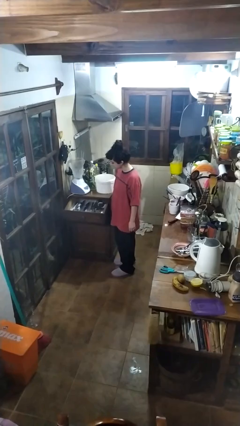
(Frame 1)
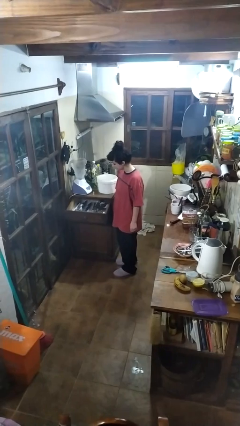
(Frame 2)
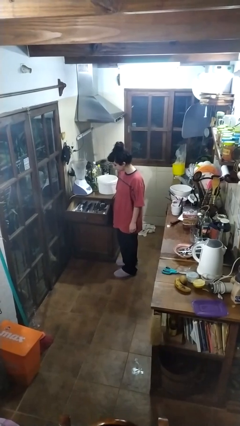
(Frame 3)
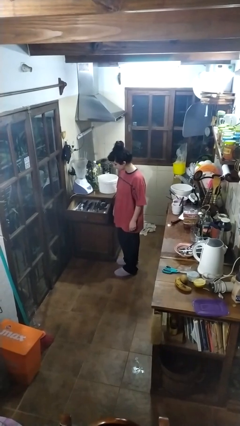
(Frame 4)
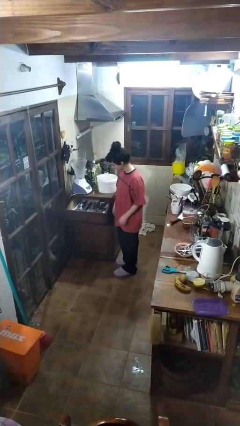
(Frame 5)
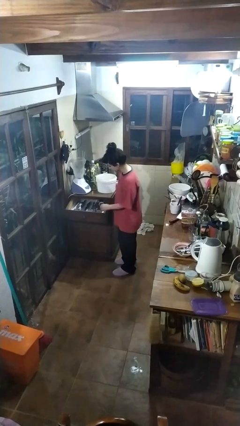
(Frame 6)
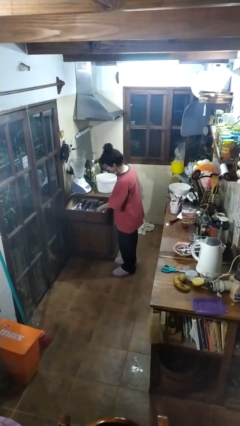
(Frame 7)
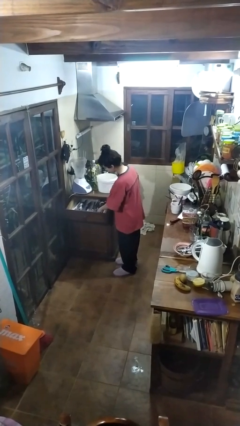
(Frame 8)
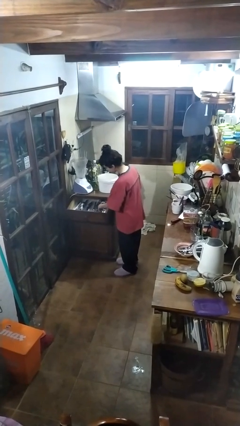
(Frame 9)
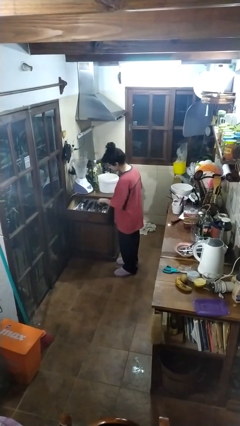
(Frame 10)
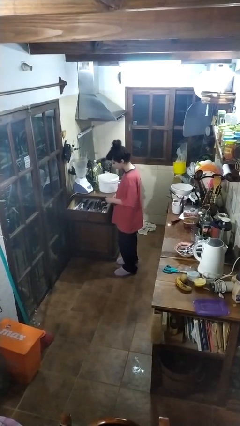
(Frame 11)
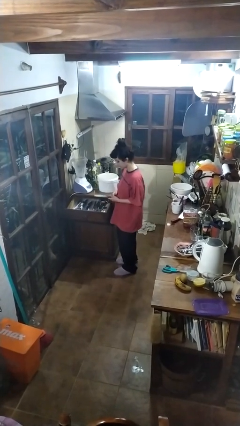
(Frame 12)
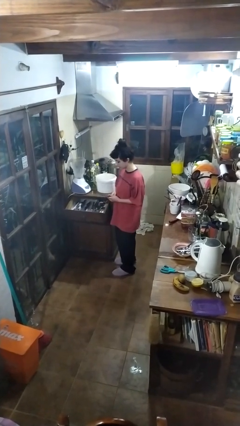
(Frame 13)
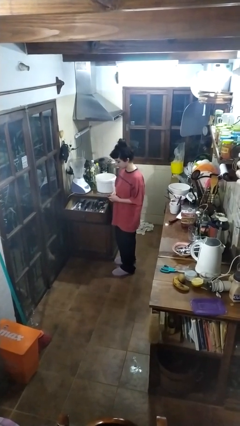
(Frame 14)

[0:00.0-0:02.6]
person takes object from kitchen drawer

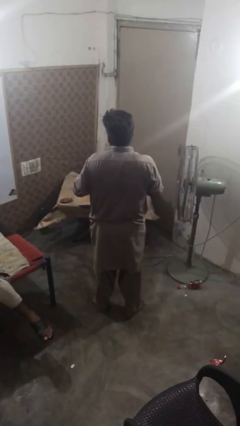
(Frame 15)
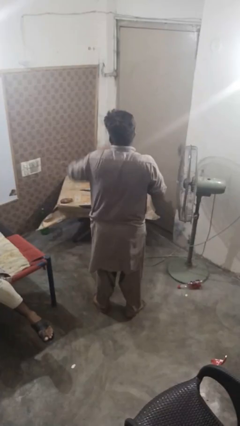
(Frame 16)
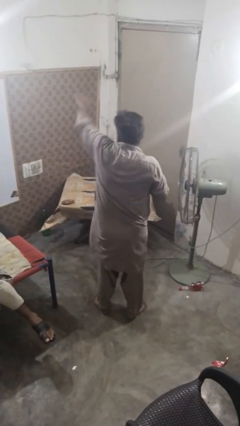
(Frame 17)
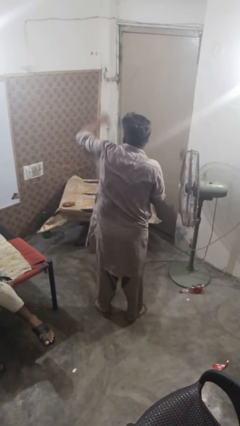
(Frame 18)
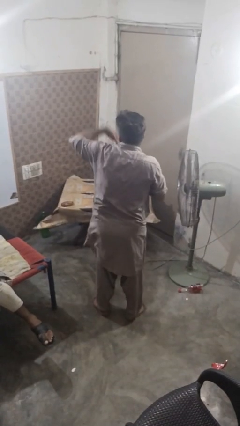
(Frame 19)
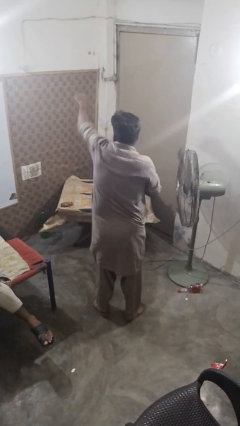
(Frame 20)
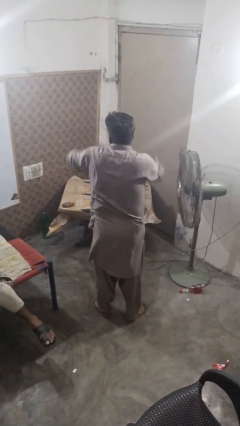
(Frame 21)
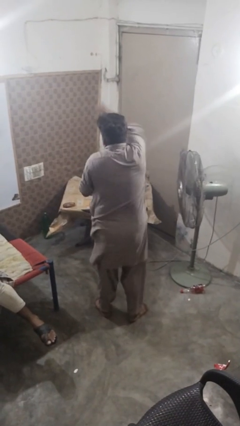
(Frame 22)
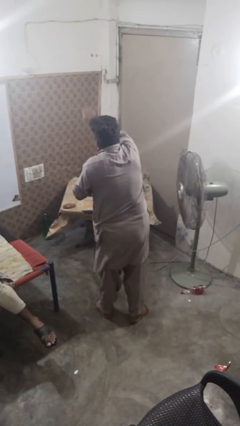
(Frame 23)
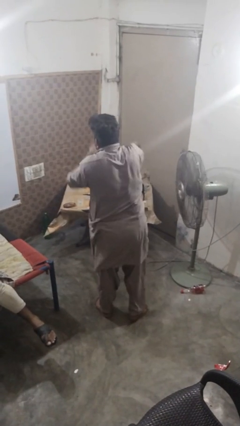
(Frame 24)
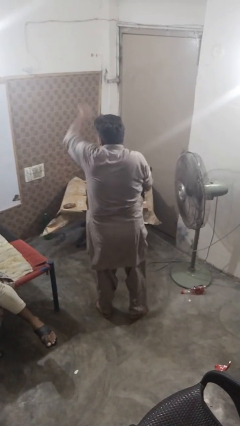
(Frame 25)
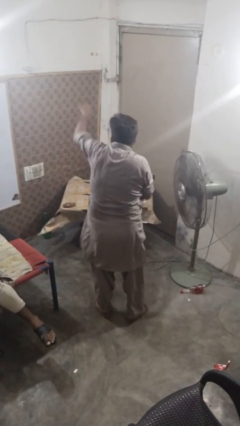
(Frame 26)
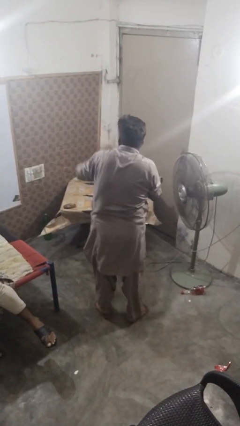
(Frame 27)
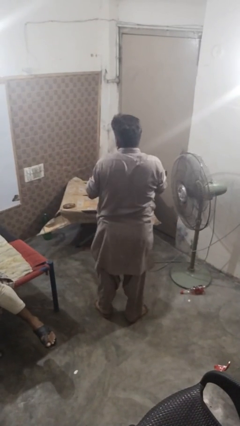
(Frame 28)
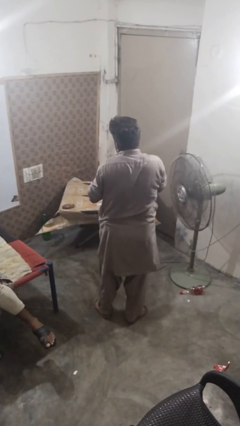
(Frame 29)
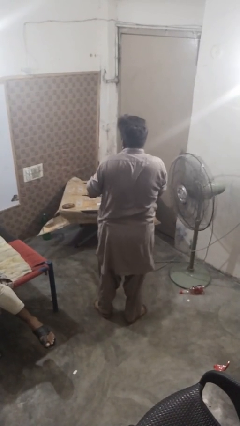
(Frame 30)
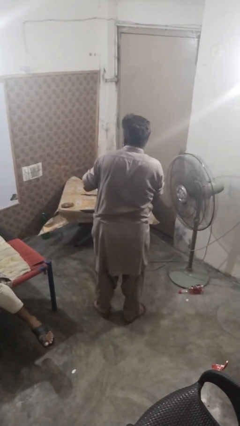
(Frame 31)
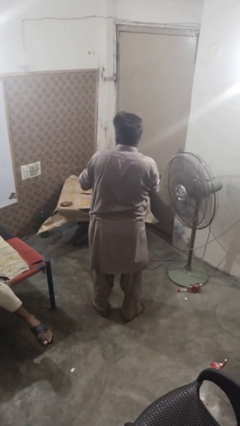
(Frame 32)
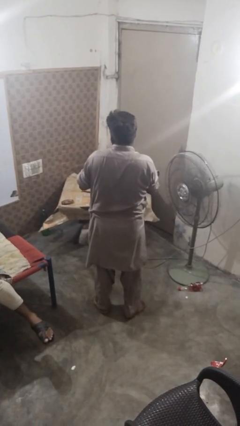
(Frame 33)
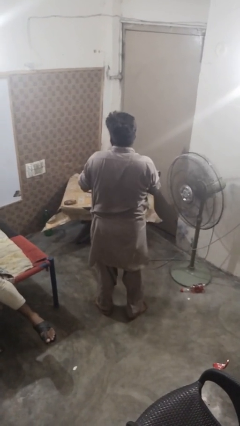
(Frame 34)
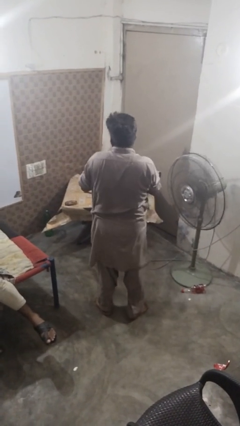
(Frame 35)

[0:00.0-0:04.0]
person punches

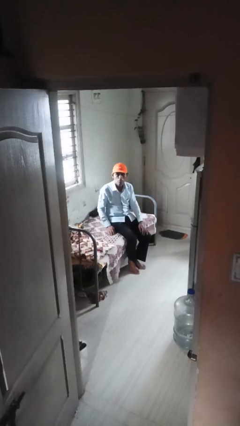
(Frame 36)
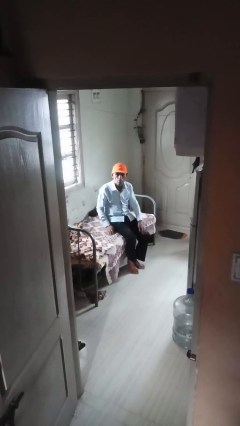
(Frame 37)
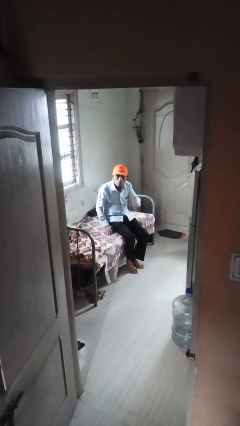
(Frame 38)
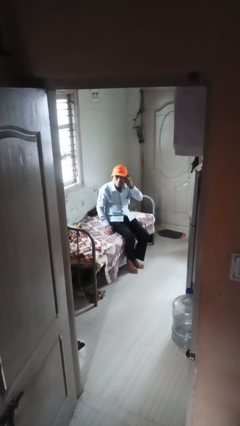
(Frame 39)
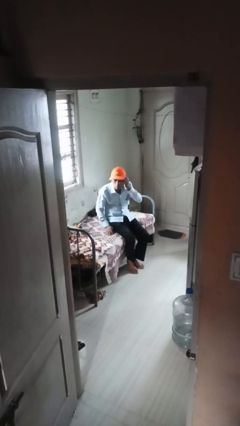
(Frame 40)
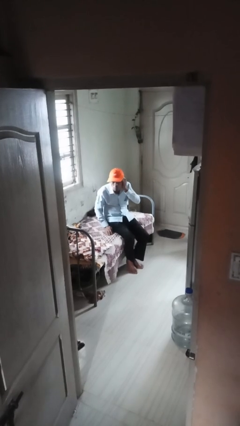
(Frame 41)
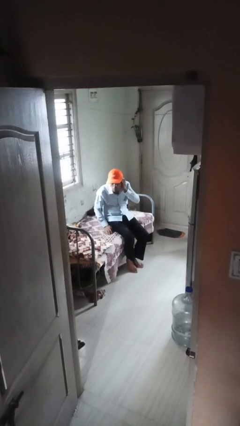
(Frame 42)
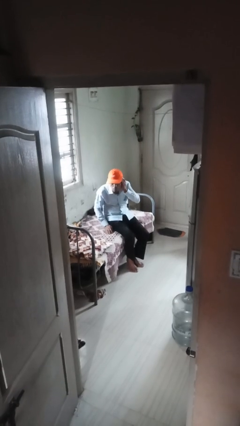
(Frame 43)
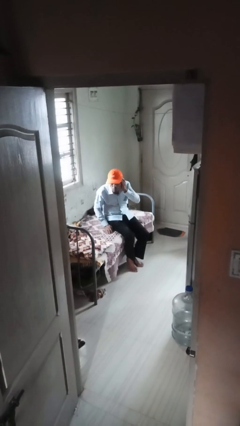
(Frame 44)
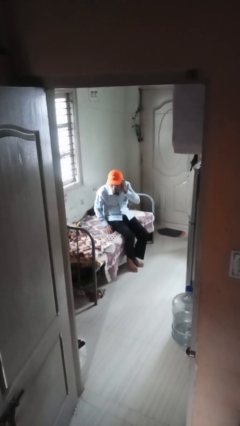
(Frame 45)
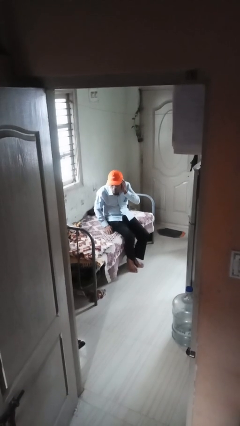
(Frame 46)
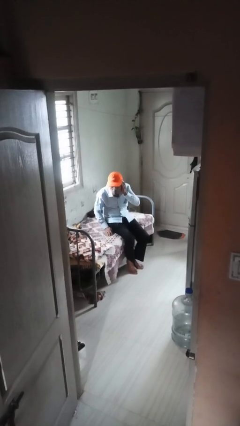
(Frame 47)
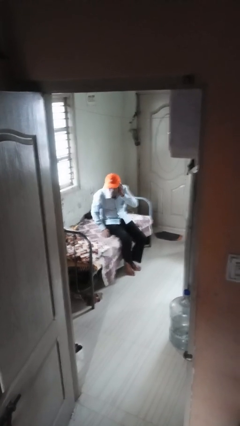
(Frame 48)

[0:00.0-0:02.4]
person gestures listen closely

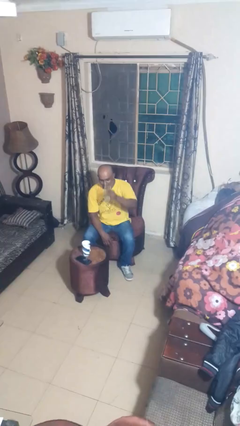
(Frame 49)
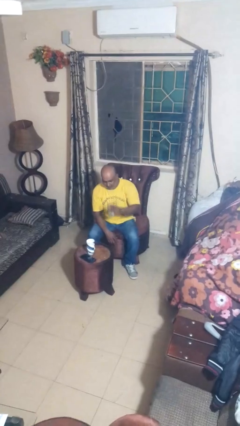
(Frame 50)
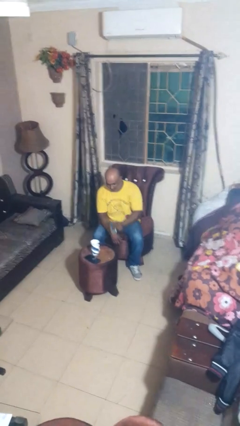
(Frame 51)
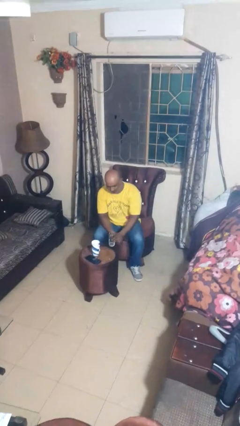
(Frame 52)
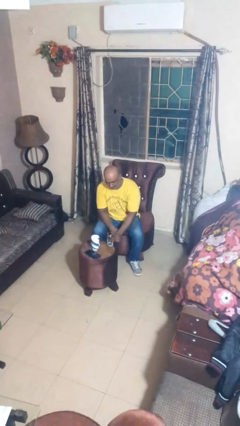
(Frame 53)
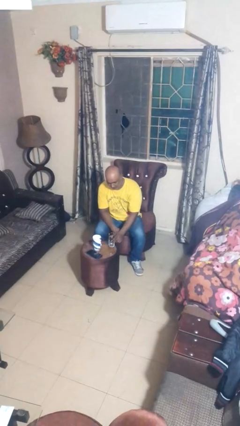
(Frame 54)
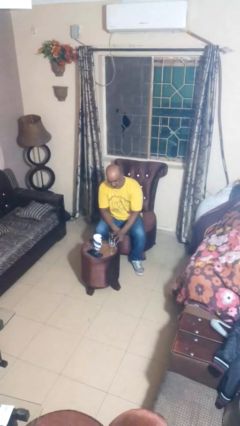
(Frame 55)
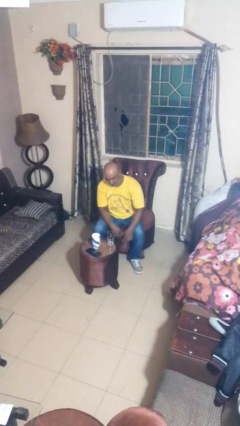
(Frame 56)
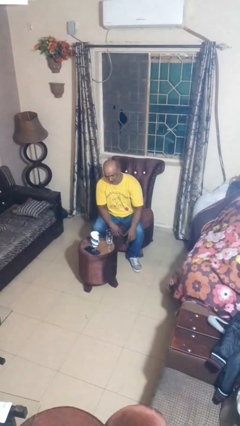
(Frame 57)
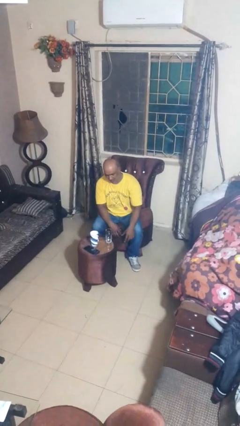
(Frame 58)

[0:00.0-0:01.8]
person puts down object on table

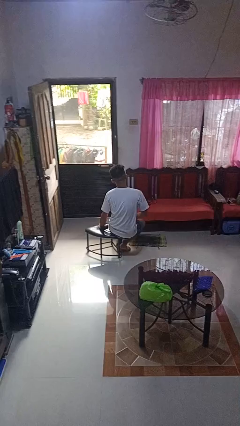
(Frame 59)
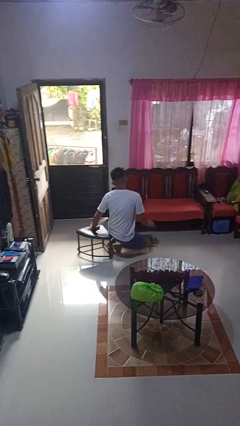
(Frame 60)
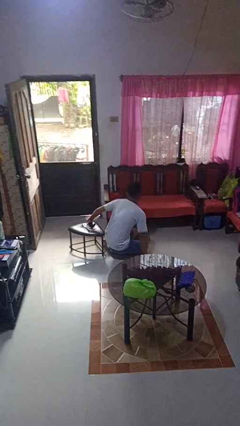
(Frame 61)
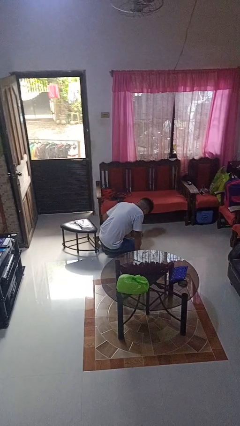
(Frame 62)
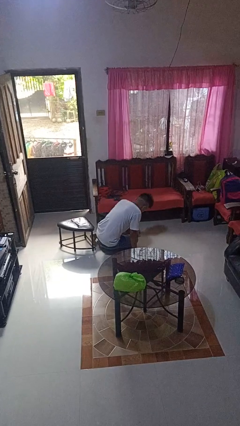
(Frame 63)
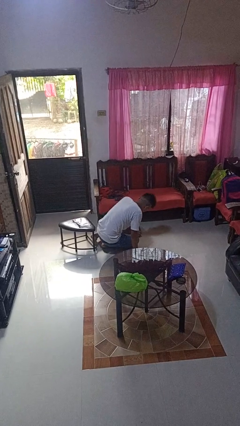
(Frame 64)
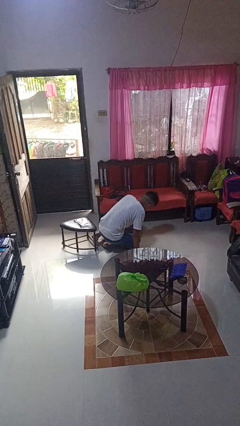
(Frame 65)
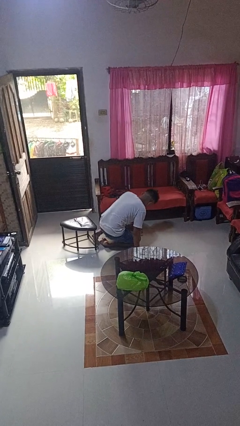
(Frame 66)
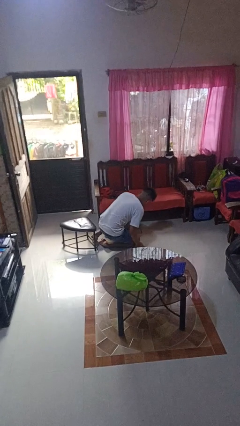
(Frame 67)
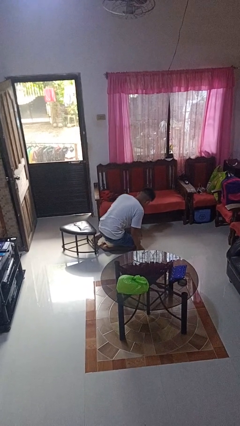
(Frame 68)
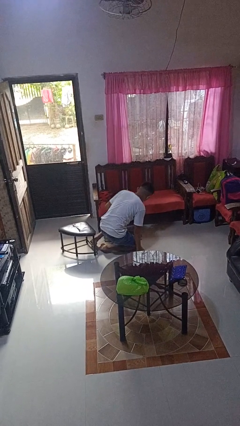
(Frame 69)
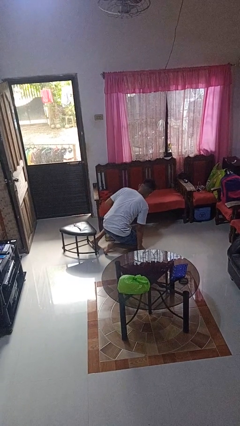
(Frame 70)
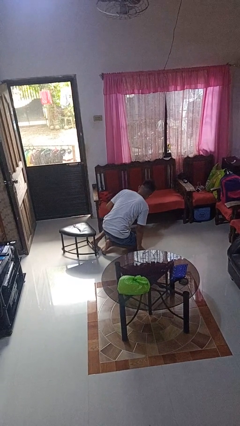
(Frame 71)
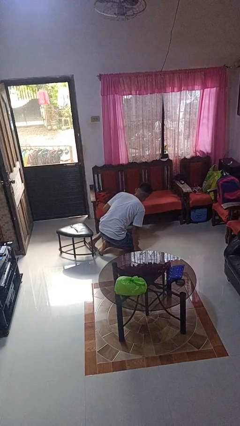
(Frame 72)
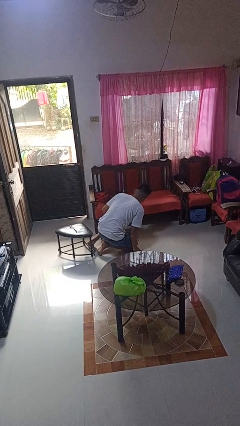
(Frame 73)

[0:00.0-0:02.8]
person falls from chair

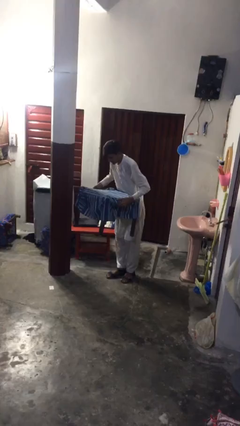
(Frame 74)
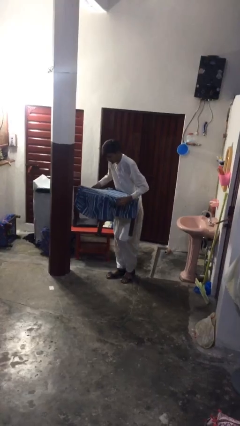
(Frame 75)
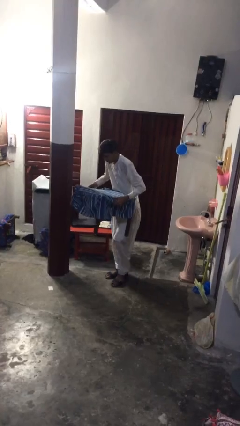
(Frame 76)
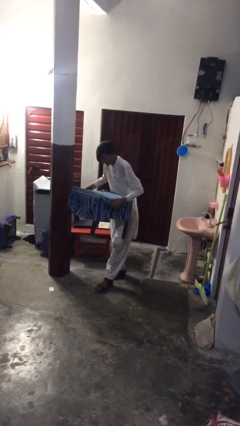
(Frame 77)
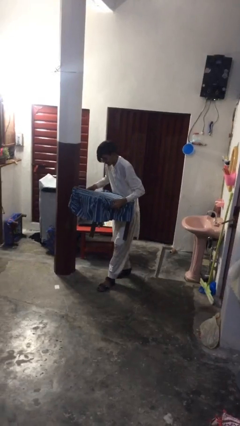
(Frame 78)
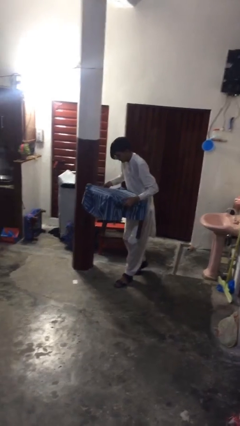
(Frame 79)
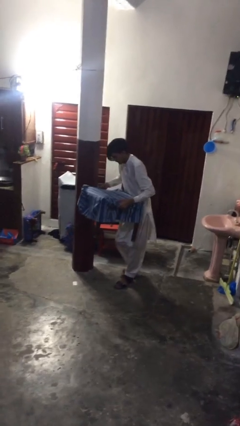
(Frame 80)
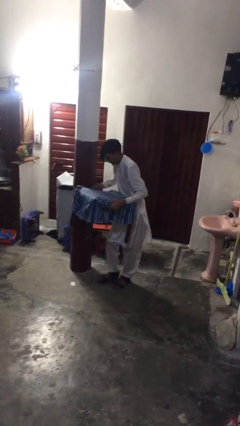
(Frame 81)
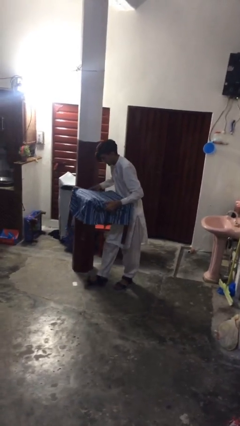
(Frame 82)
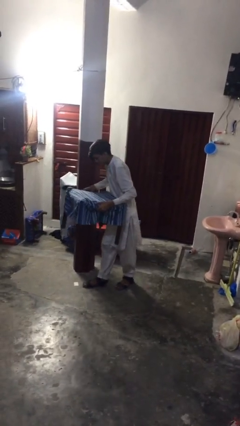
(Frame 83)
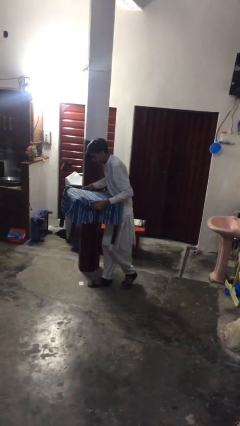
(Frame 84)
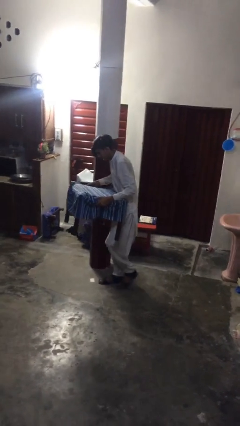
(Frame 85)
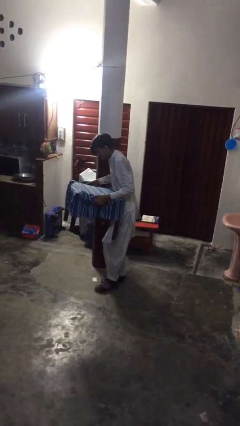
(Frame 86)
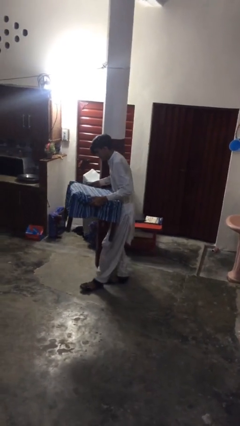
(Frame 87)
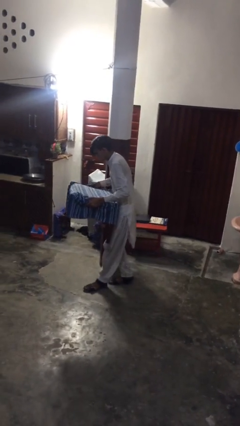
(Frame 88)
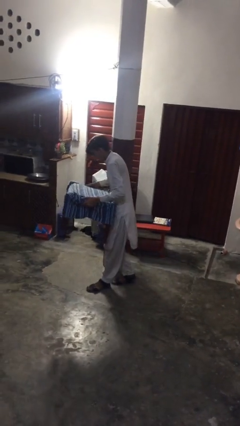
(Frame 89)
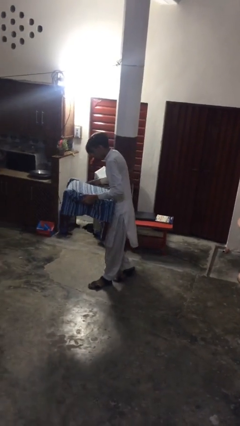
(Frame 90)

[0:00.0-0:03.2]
person carries heavy object

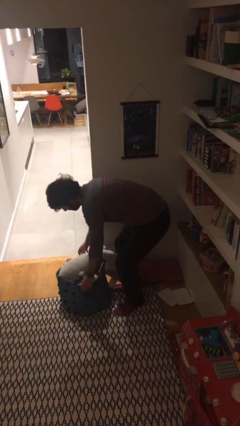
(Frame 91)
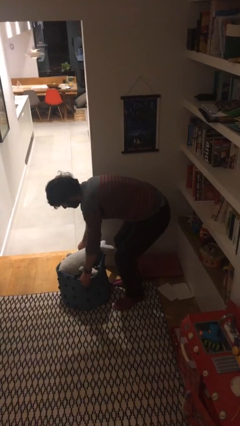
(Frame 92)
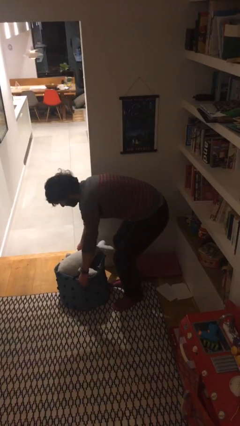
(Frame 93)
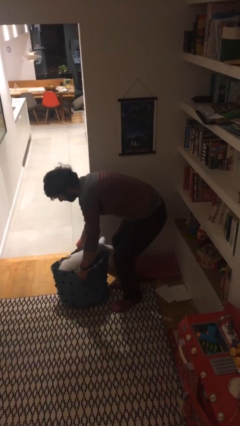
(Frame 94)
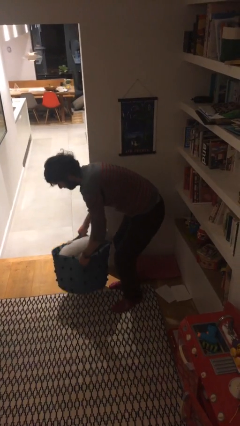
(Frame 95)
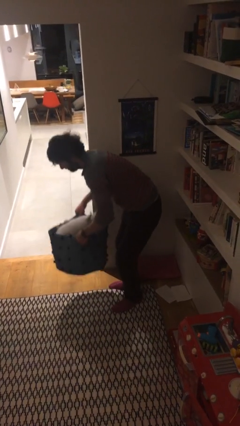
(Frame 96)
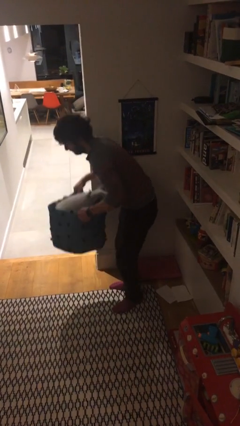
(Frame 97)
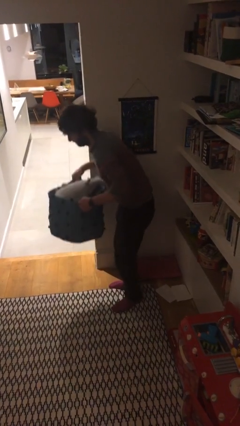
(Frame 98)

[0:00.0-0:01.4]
person picks up object from floor
